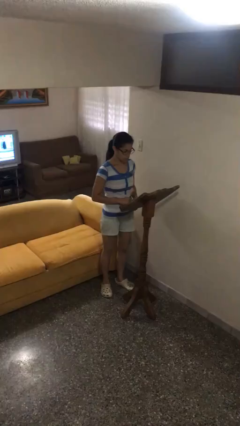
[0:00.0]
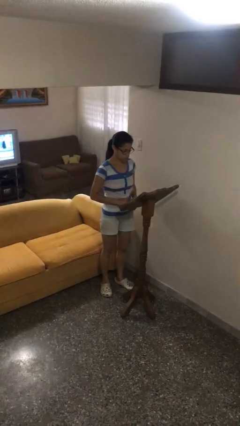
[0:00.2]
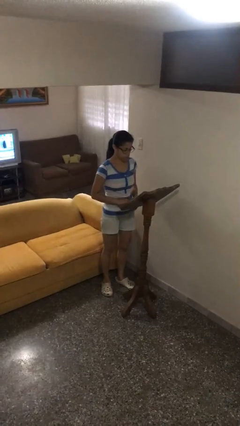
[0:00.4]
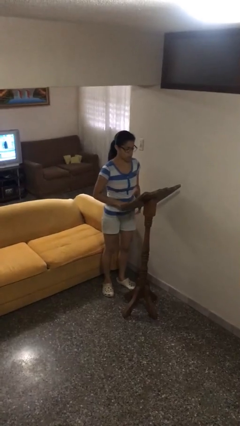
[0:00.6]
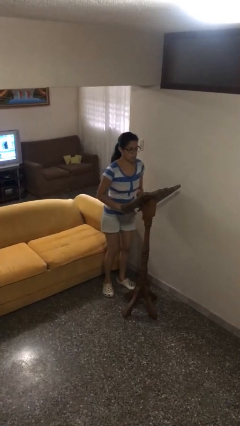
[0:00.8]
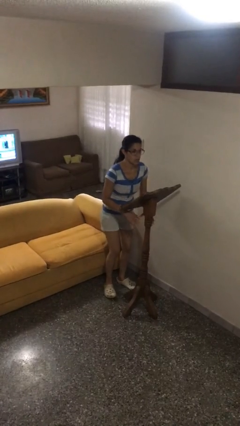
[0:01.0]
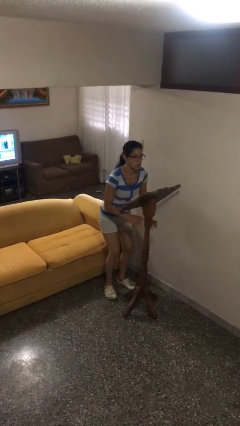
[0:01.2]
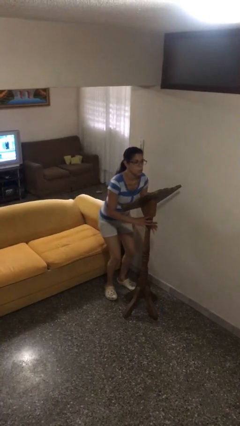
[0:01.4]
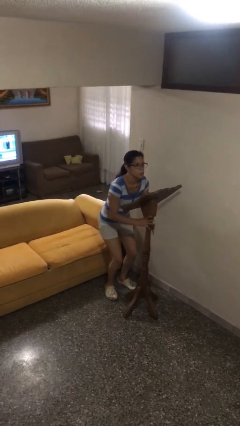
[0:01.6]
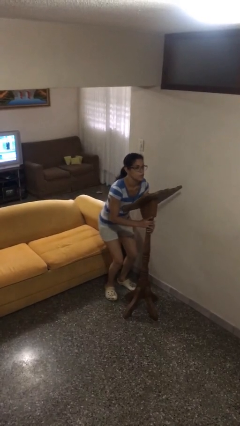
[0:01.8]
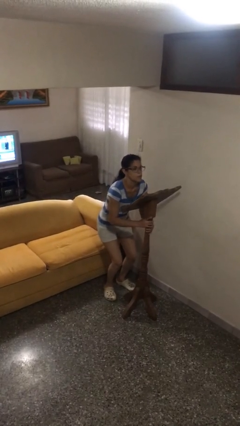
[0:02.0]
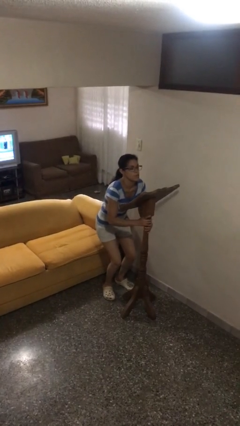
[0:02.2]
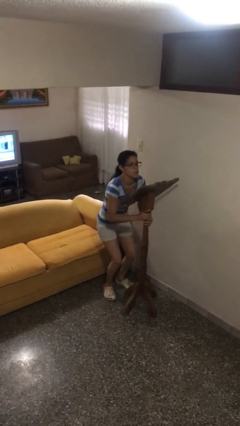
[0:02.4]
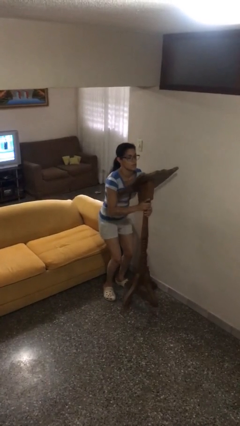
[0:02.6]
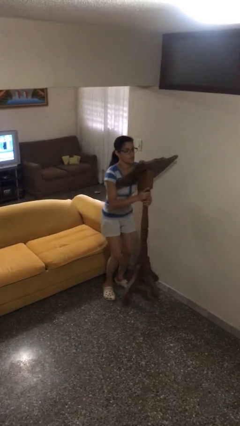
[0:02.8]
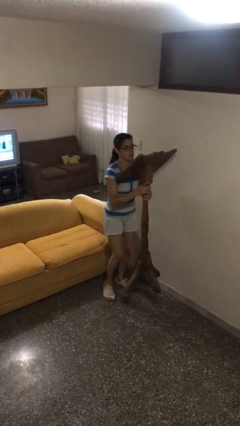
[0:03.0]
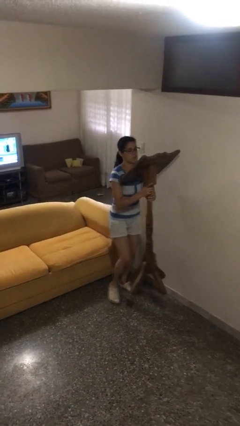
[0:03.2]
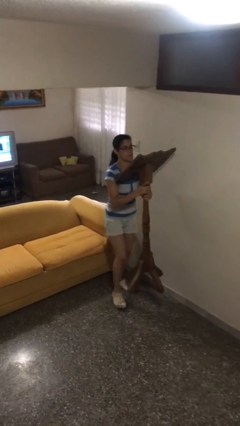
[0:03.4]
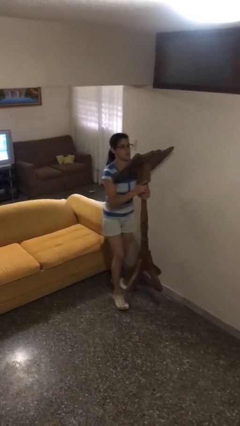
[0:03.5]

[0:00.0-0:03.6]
person picks up object from floor

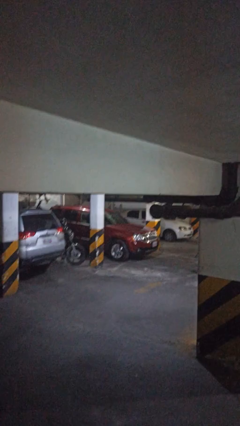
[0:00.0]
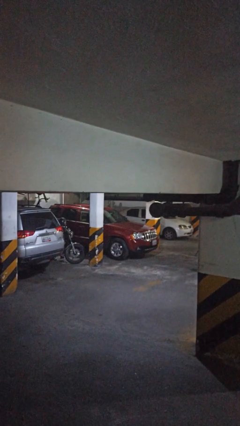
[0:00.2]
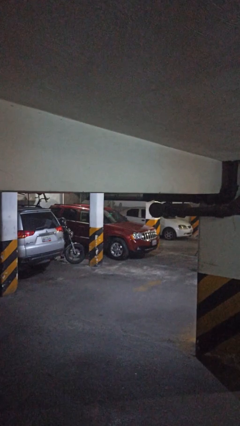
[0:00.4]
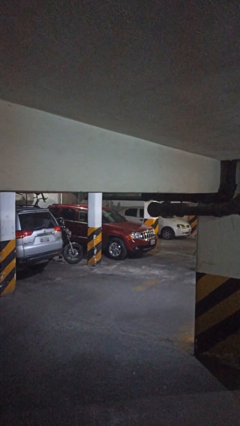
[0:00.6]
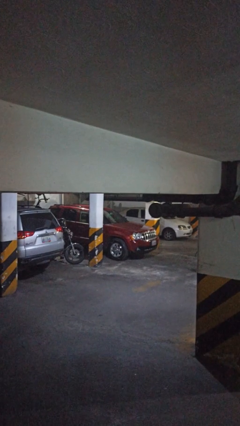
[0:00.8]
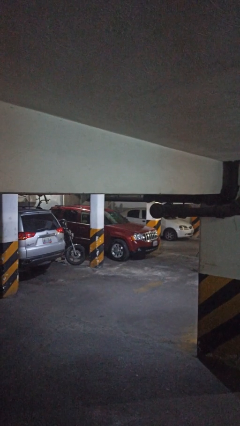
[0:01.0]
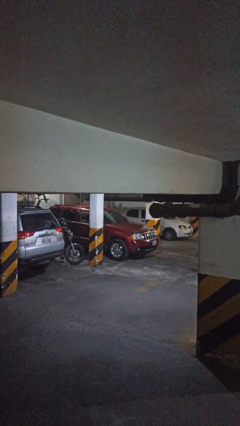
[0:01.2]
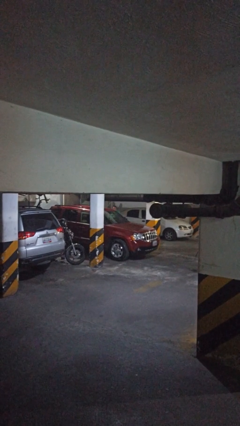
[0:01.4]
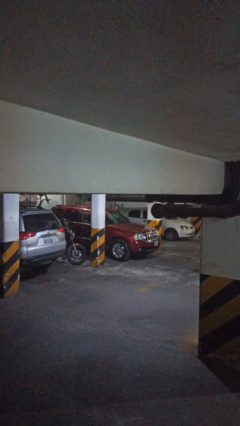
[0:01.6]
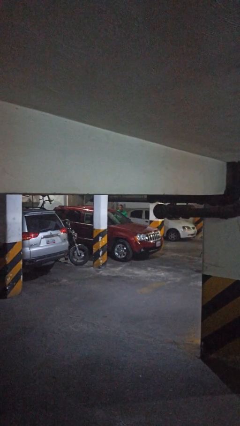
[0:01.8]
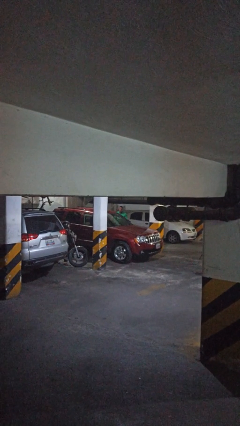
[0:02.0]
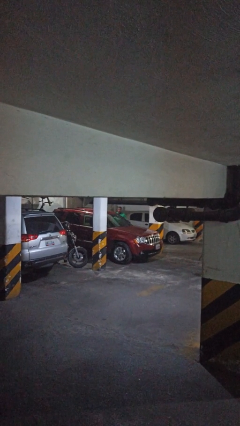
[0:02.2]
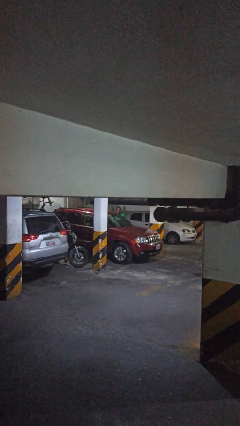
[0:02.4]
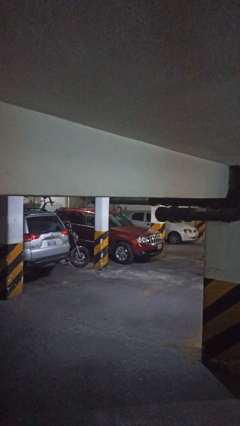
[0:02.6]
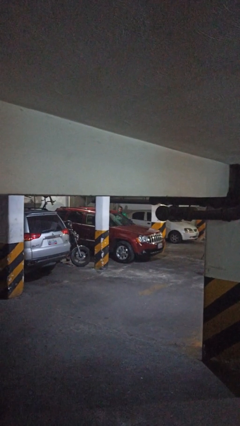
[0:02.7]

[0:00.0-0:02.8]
person exits car

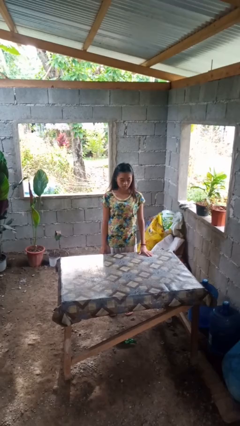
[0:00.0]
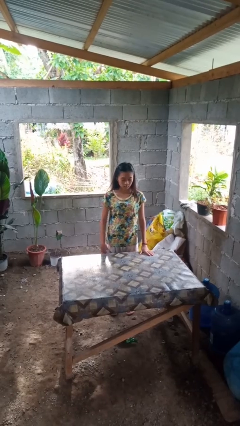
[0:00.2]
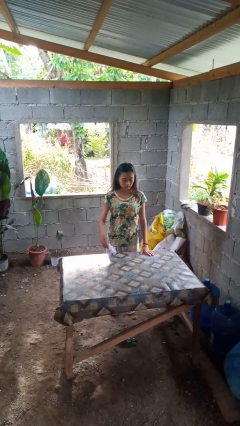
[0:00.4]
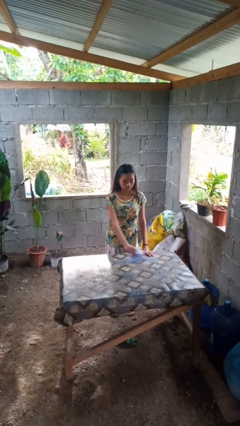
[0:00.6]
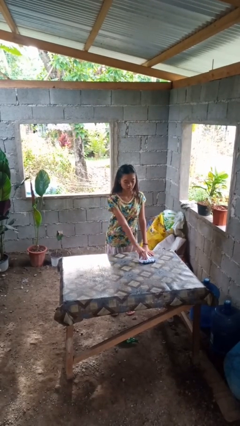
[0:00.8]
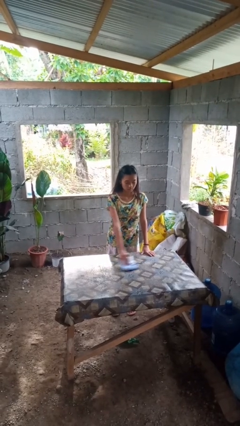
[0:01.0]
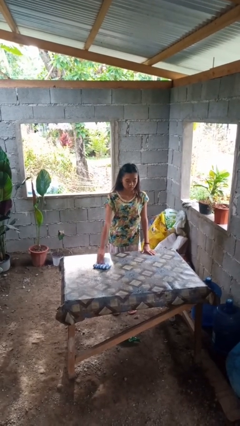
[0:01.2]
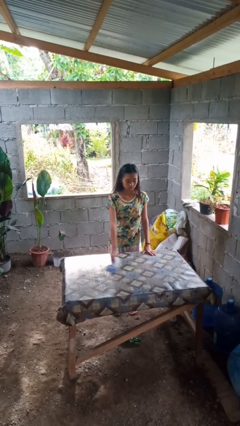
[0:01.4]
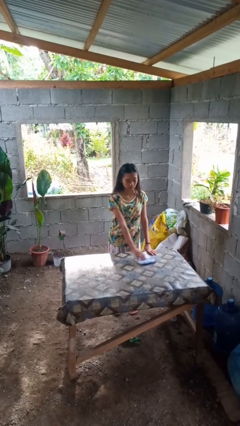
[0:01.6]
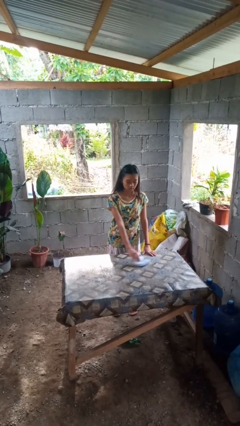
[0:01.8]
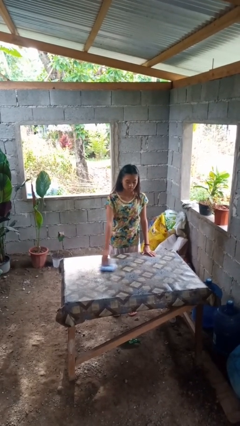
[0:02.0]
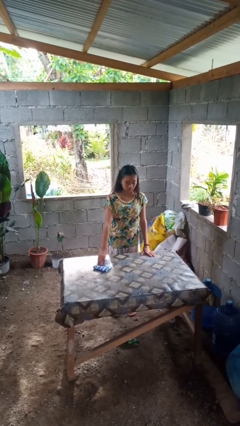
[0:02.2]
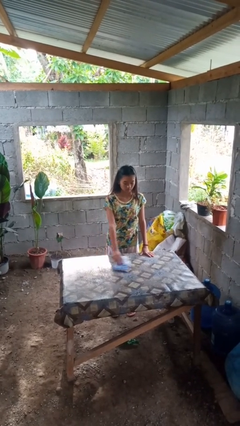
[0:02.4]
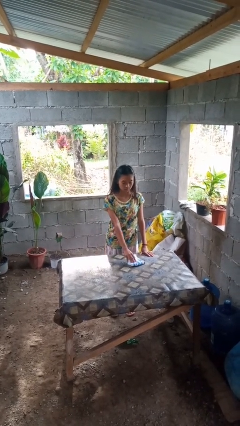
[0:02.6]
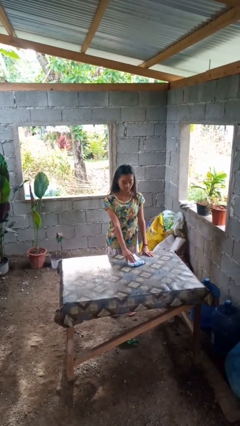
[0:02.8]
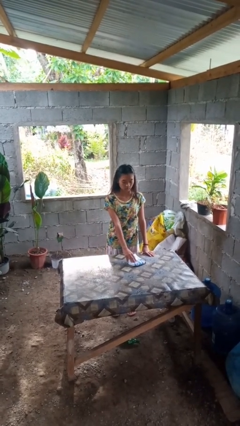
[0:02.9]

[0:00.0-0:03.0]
person cleans table with rag

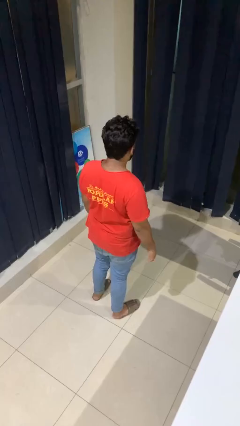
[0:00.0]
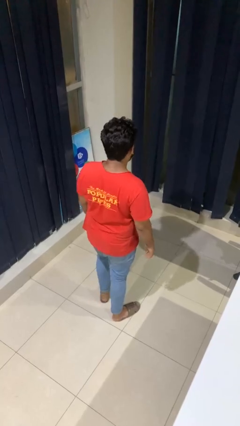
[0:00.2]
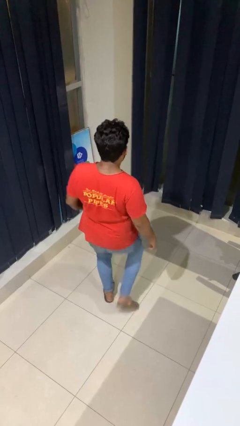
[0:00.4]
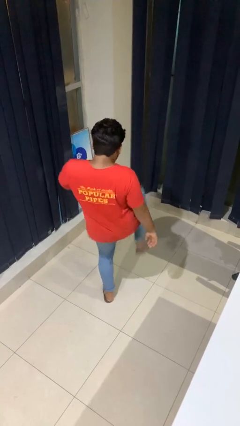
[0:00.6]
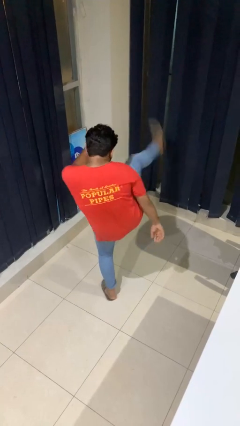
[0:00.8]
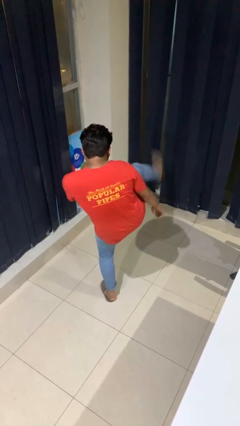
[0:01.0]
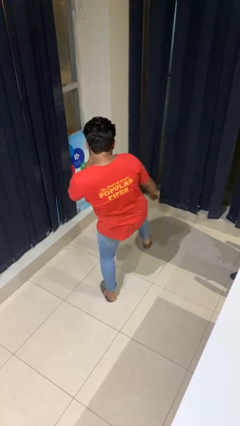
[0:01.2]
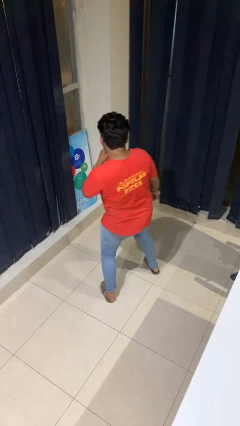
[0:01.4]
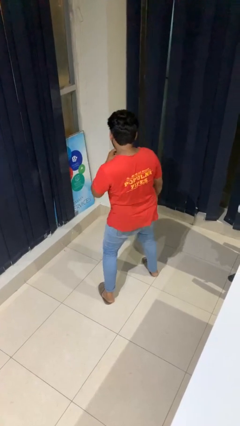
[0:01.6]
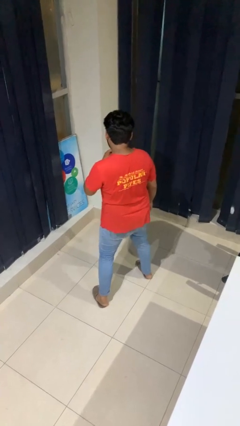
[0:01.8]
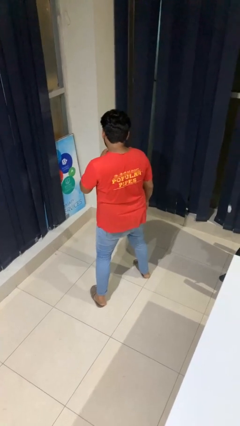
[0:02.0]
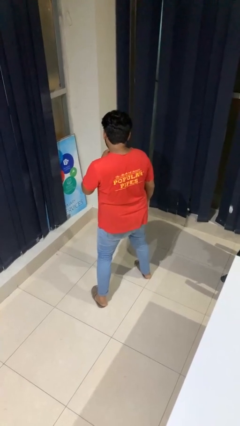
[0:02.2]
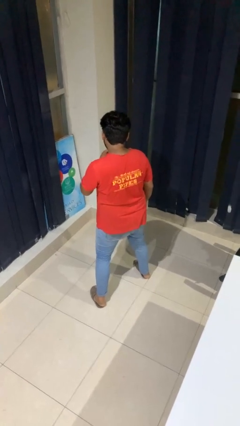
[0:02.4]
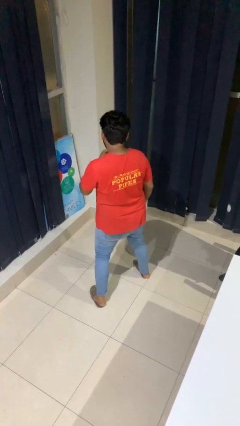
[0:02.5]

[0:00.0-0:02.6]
person karate kicks

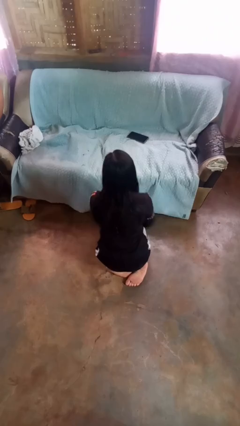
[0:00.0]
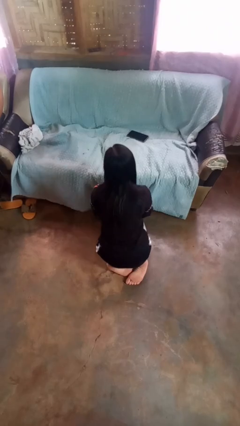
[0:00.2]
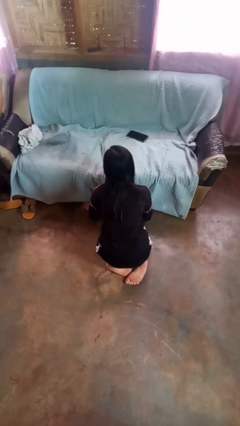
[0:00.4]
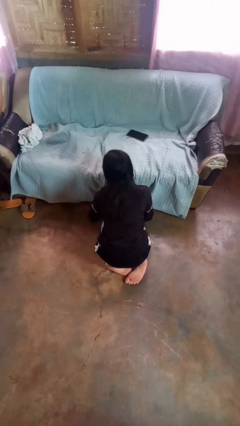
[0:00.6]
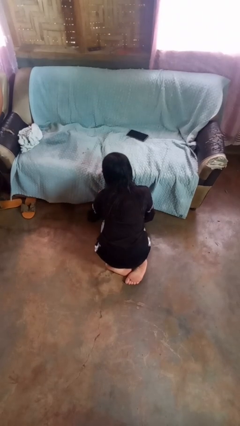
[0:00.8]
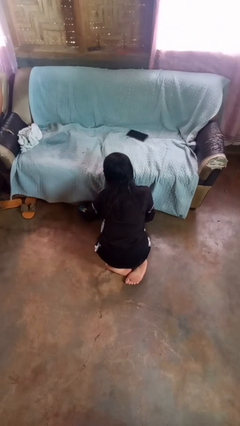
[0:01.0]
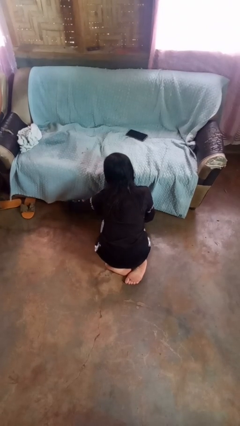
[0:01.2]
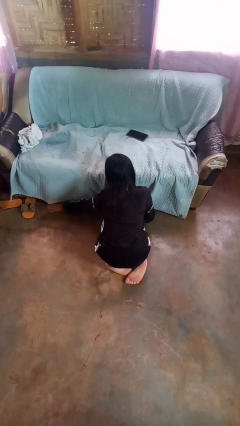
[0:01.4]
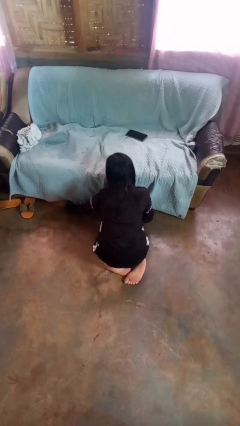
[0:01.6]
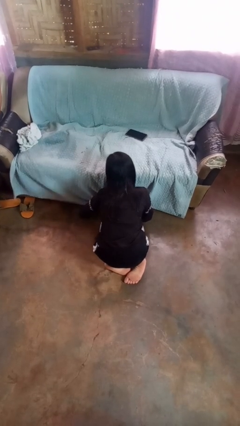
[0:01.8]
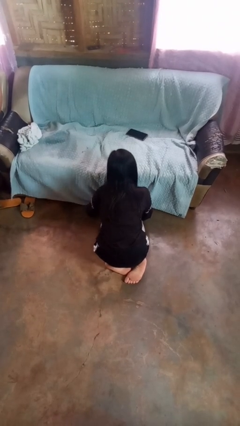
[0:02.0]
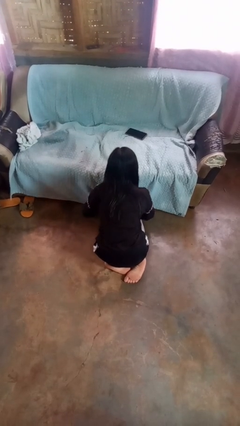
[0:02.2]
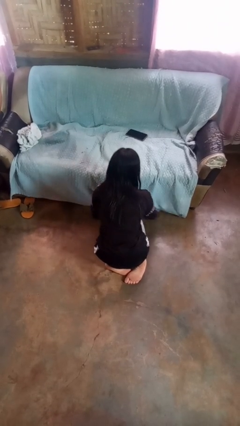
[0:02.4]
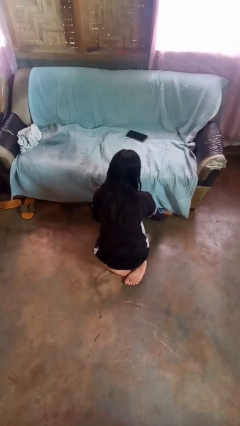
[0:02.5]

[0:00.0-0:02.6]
person searches under couch

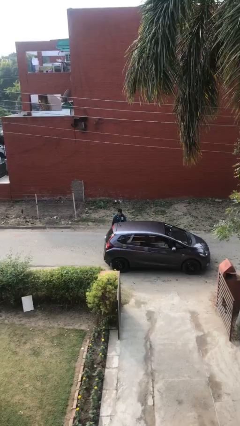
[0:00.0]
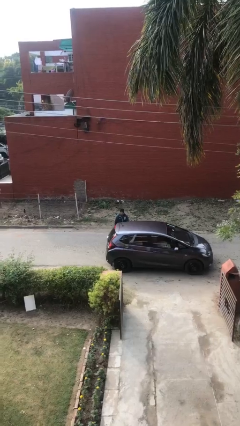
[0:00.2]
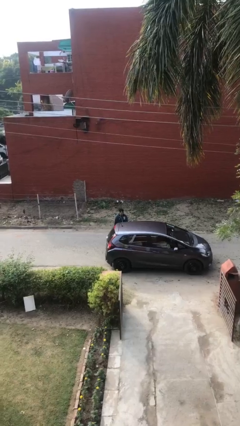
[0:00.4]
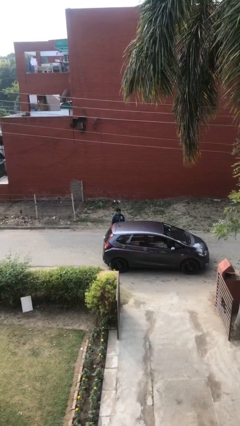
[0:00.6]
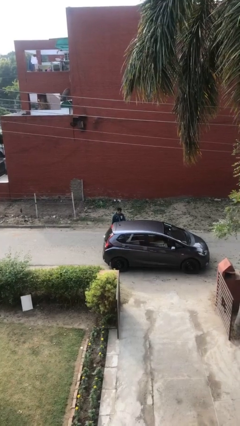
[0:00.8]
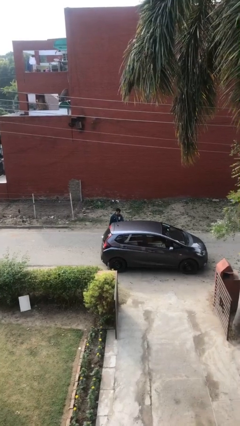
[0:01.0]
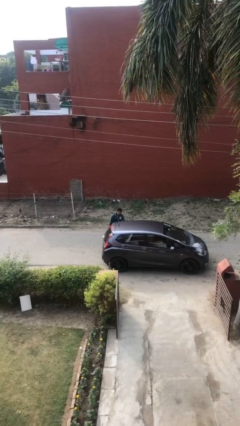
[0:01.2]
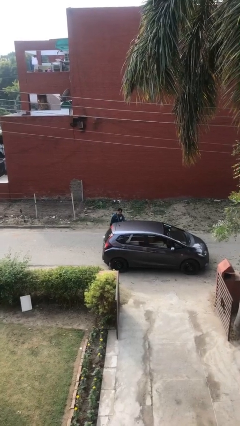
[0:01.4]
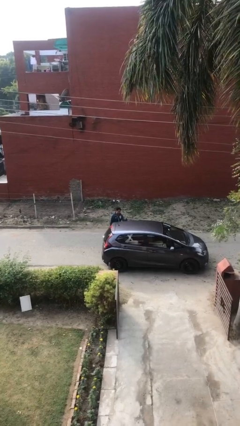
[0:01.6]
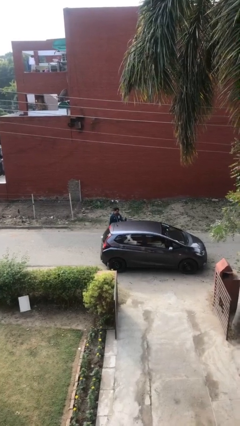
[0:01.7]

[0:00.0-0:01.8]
person opens car door

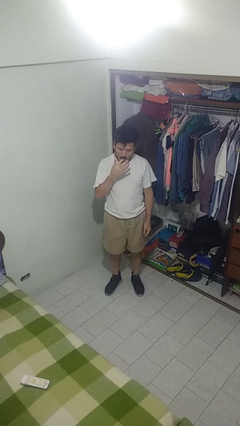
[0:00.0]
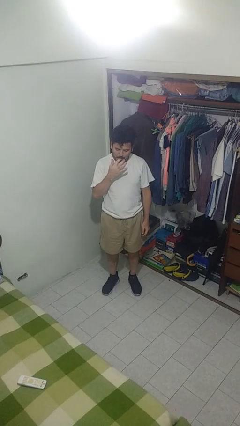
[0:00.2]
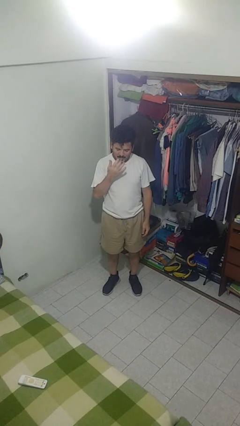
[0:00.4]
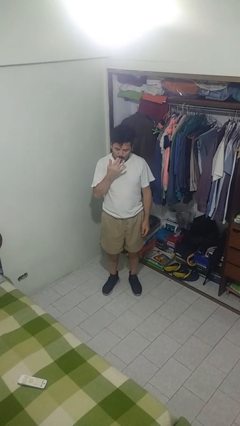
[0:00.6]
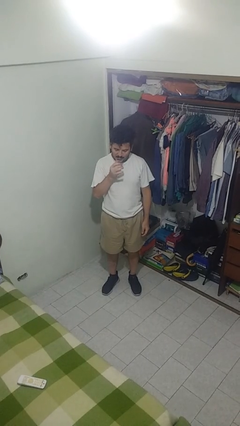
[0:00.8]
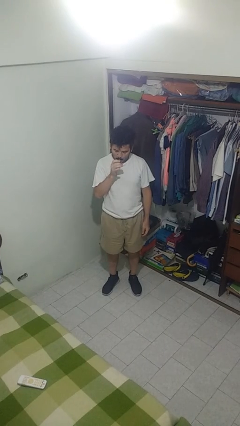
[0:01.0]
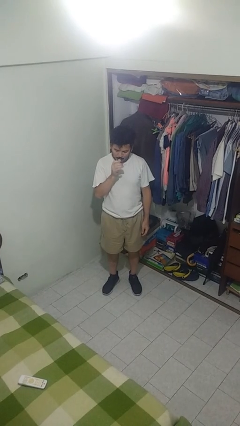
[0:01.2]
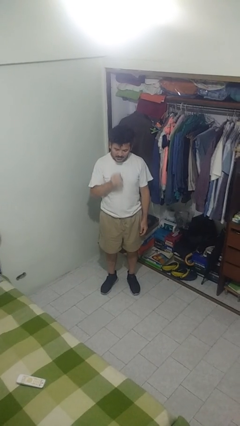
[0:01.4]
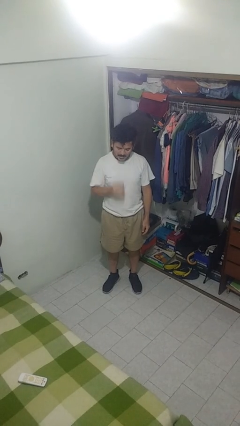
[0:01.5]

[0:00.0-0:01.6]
person licks fingers
